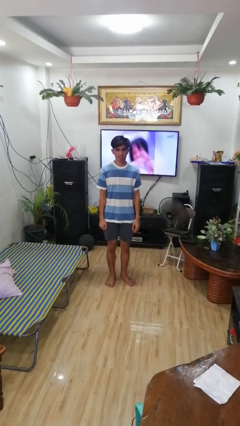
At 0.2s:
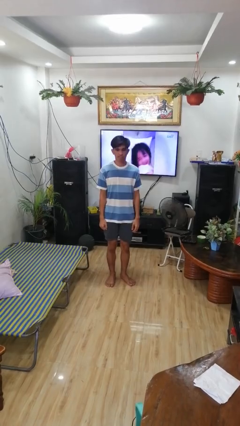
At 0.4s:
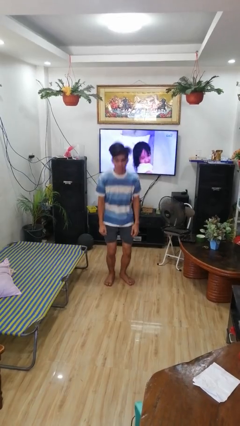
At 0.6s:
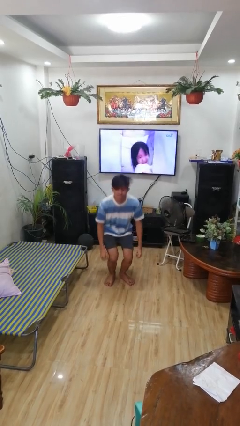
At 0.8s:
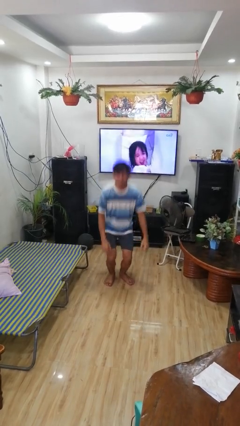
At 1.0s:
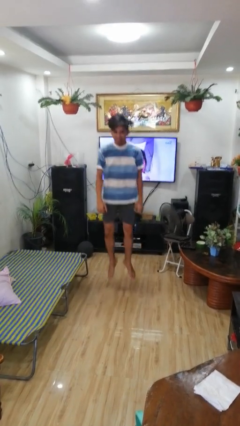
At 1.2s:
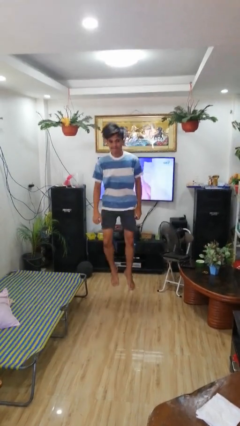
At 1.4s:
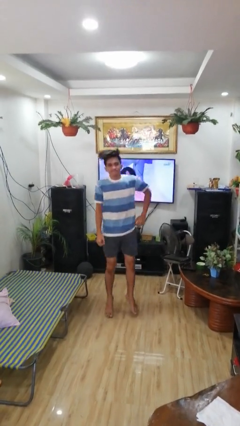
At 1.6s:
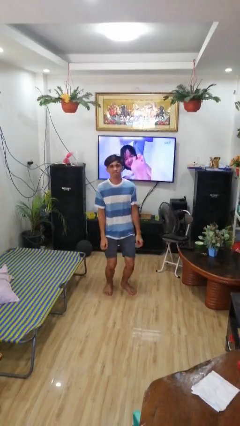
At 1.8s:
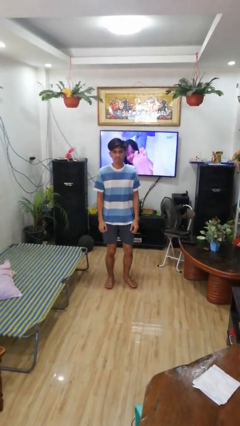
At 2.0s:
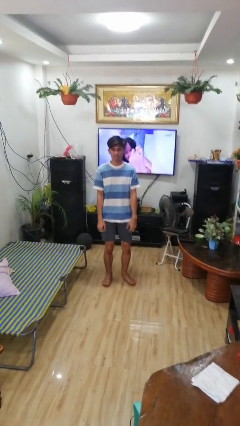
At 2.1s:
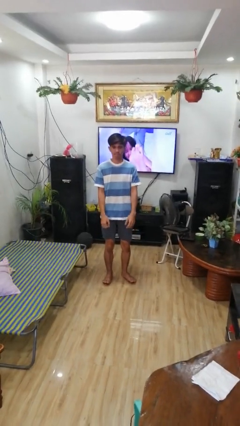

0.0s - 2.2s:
person jumps

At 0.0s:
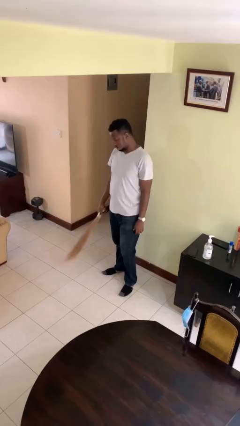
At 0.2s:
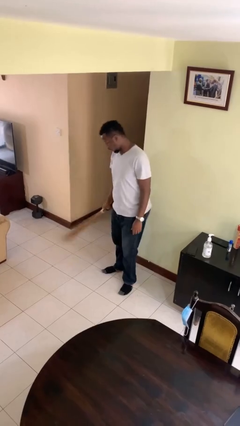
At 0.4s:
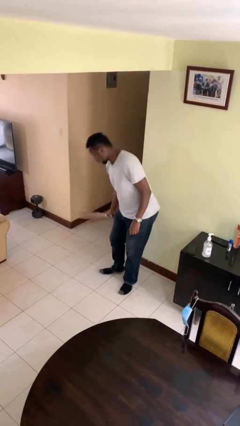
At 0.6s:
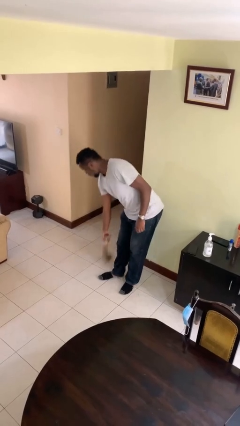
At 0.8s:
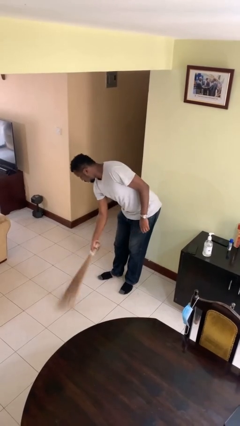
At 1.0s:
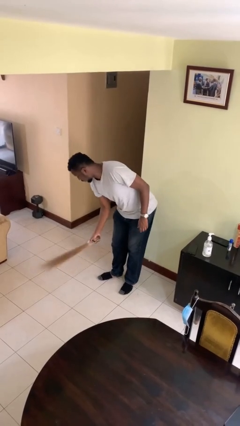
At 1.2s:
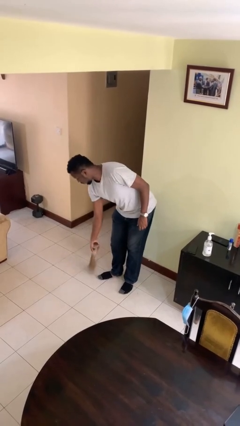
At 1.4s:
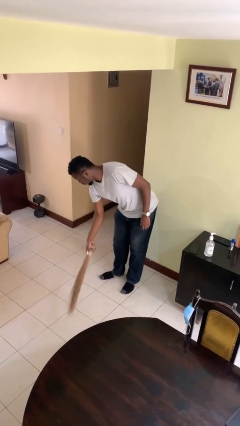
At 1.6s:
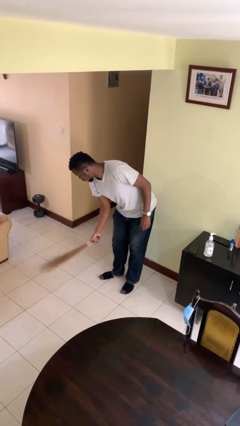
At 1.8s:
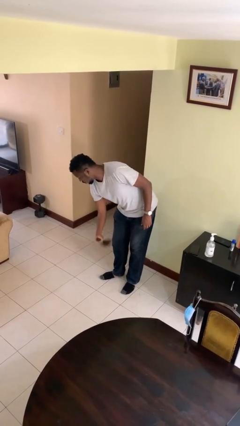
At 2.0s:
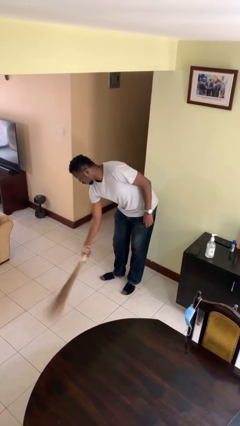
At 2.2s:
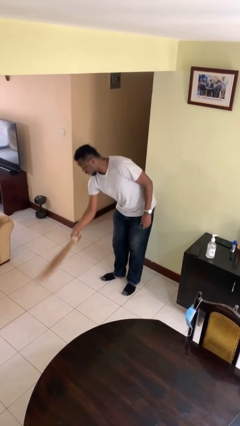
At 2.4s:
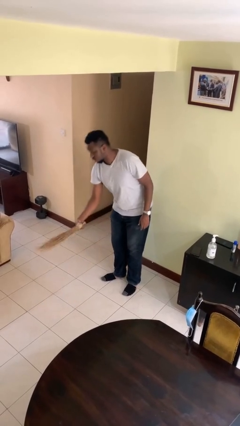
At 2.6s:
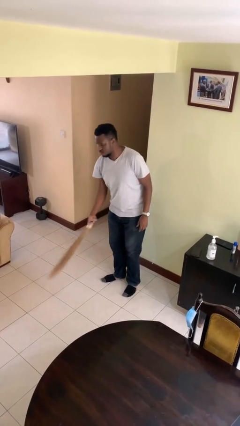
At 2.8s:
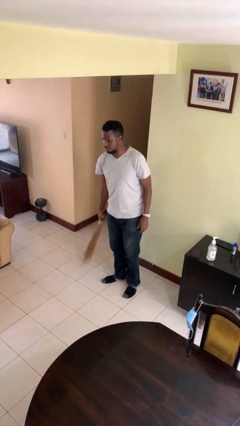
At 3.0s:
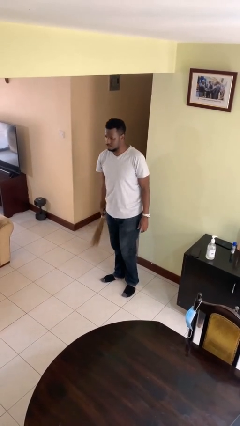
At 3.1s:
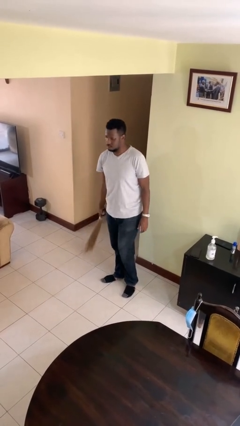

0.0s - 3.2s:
person sweeps floor

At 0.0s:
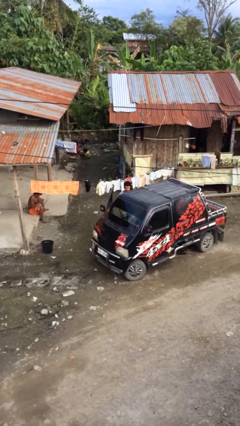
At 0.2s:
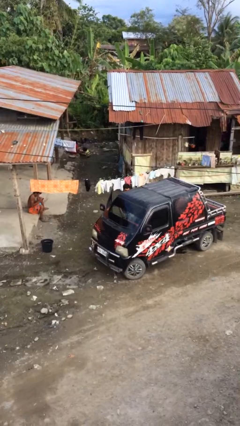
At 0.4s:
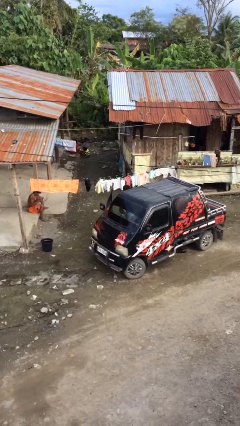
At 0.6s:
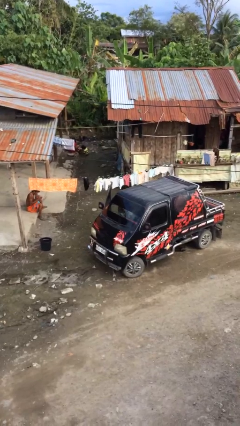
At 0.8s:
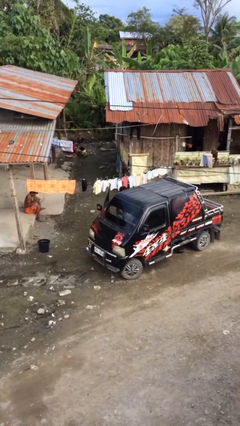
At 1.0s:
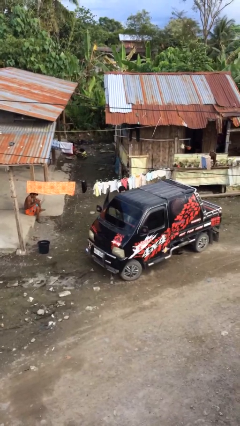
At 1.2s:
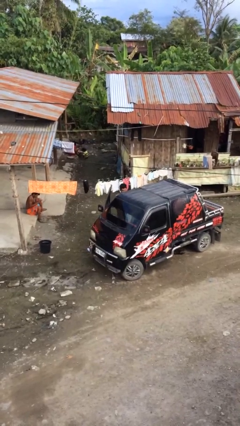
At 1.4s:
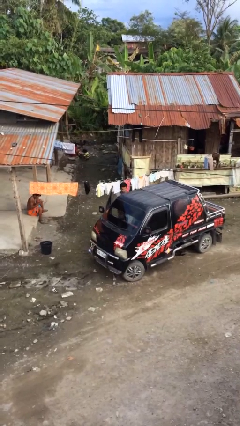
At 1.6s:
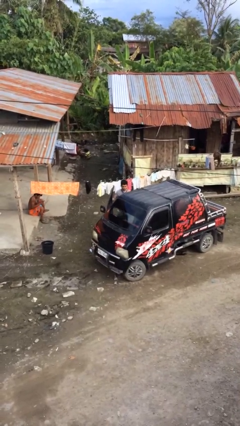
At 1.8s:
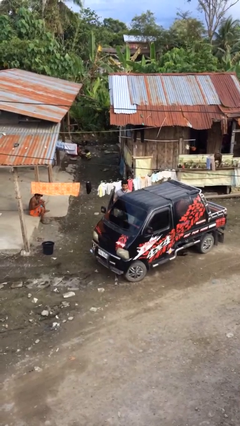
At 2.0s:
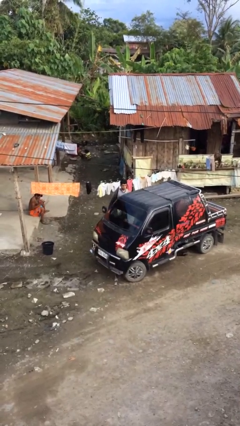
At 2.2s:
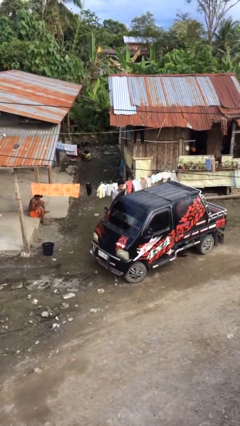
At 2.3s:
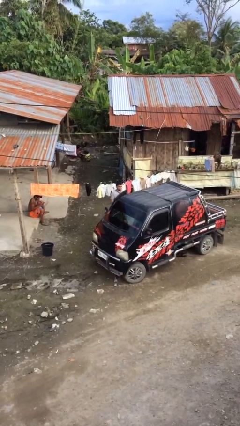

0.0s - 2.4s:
person unloads car

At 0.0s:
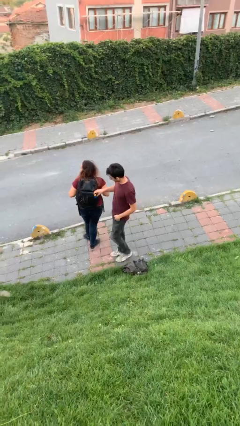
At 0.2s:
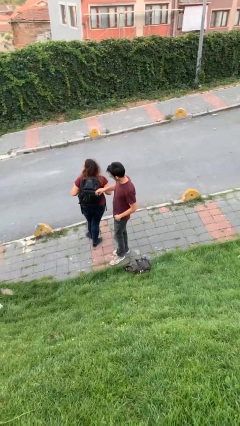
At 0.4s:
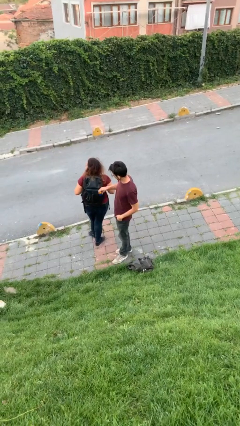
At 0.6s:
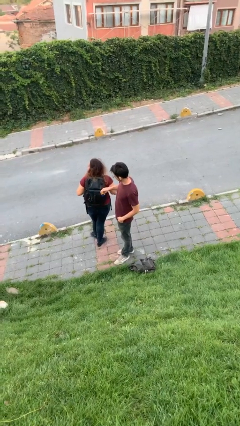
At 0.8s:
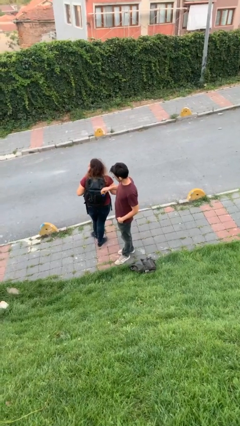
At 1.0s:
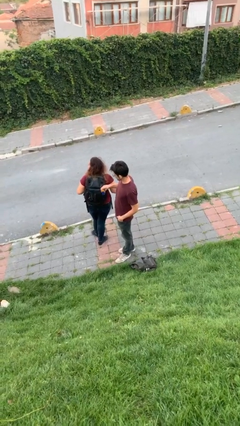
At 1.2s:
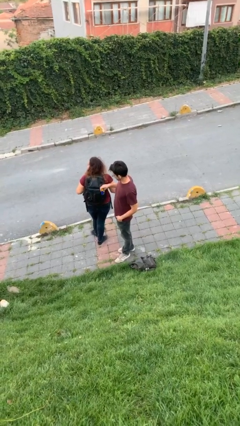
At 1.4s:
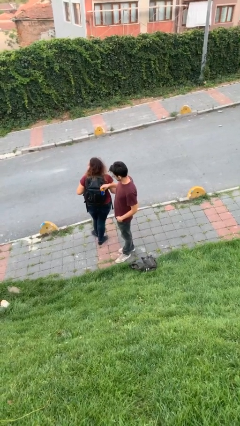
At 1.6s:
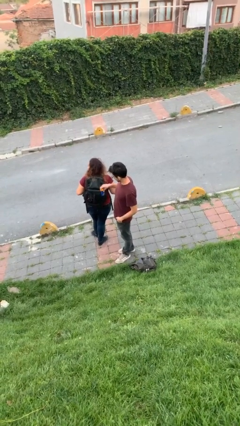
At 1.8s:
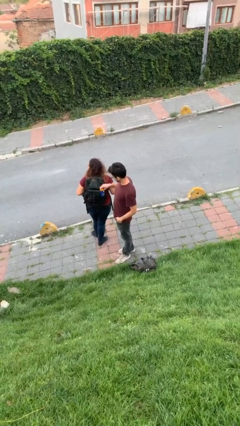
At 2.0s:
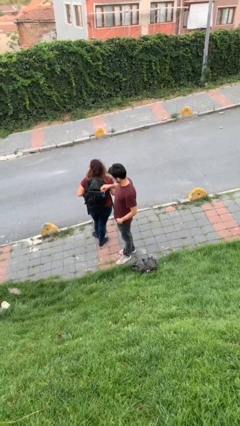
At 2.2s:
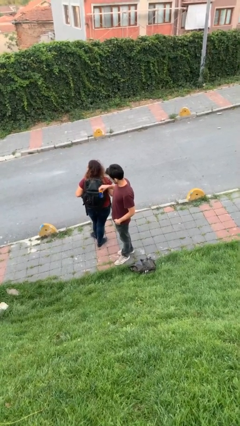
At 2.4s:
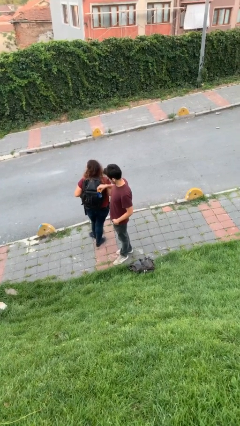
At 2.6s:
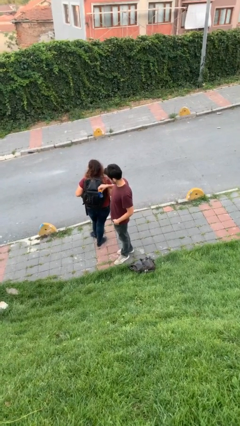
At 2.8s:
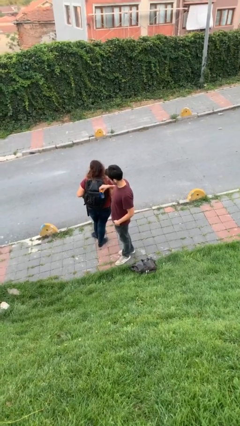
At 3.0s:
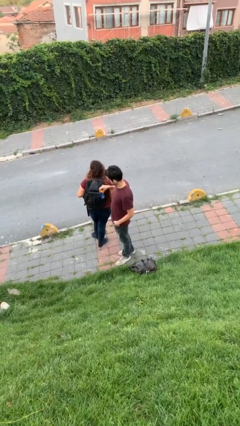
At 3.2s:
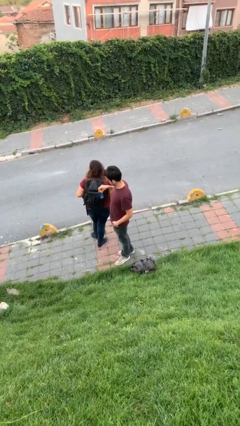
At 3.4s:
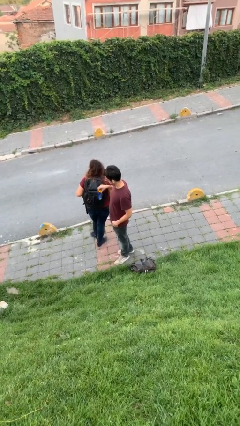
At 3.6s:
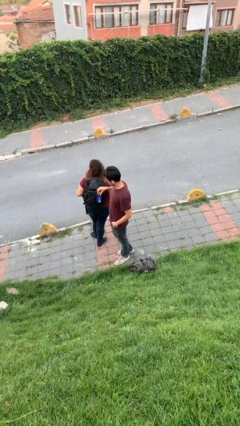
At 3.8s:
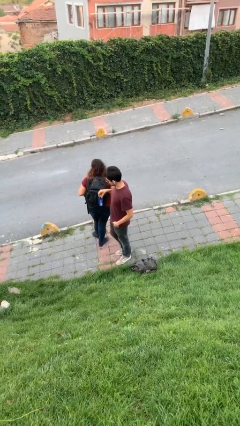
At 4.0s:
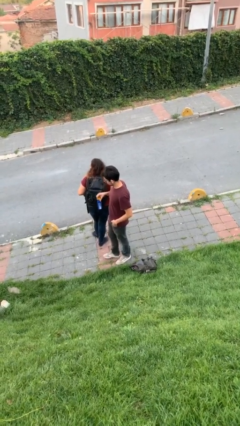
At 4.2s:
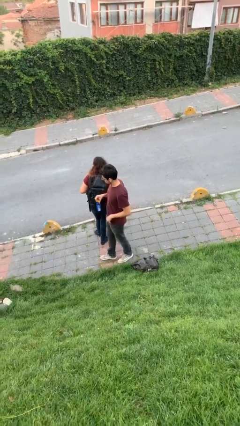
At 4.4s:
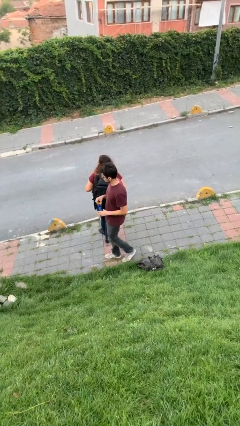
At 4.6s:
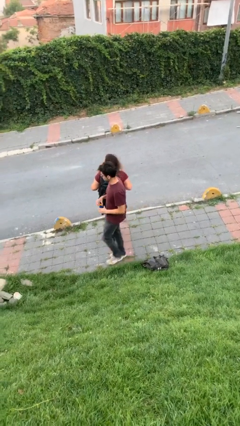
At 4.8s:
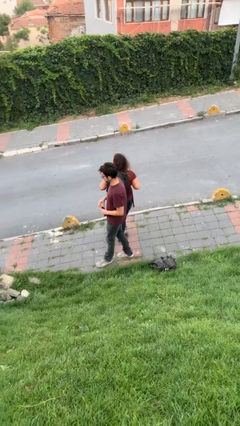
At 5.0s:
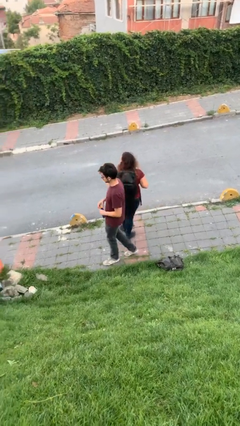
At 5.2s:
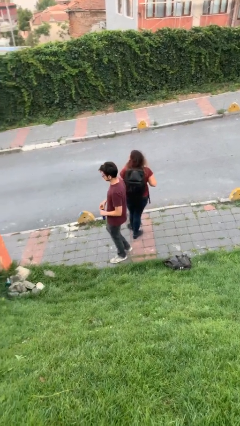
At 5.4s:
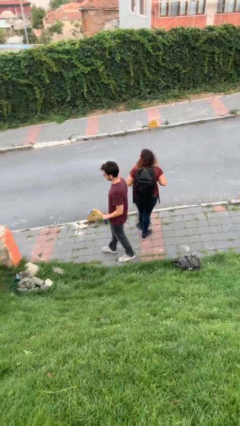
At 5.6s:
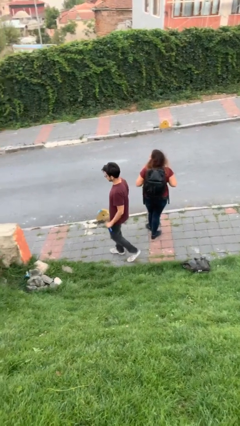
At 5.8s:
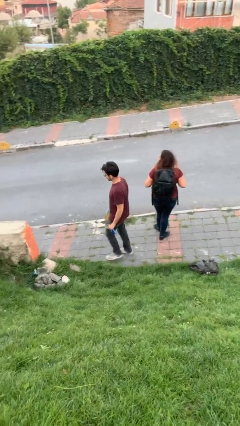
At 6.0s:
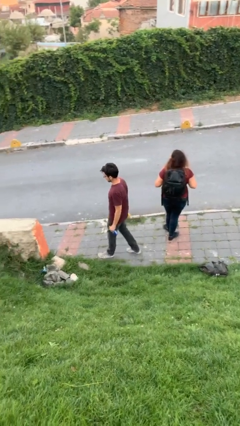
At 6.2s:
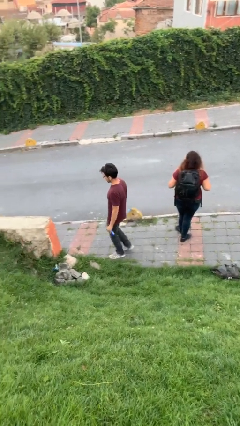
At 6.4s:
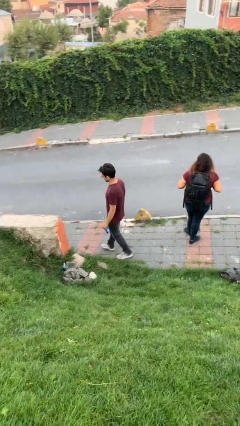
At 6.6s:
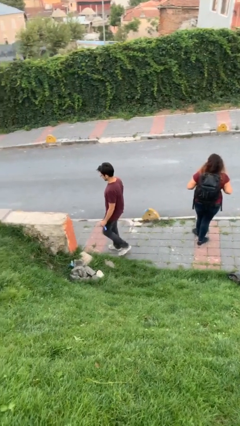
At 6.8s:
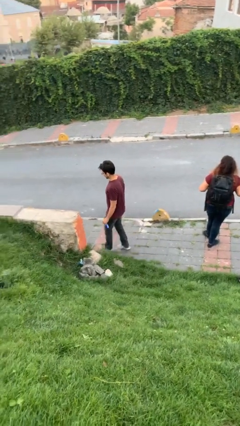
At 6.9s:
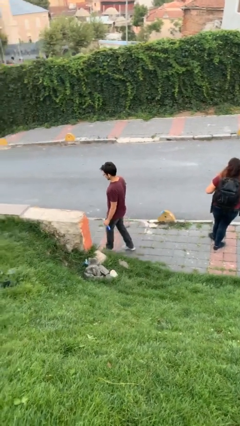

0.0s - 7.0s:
person steals object from person

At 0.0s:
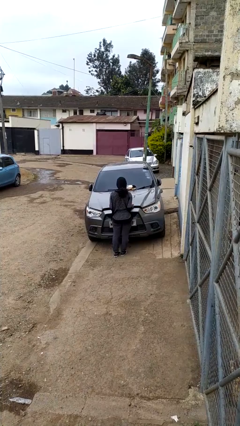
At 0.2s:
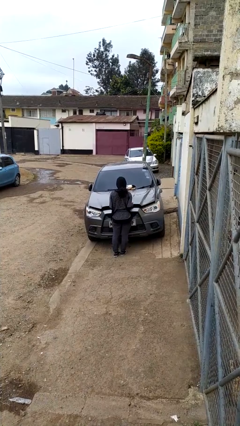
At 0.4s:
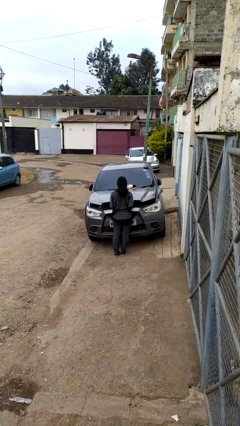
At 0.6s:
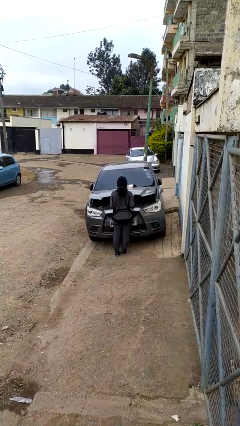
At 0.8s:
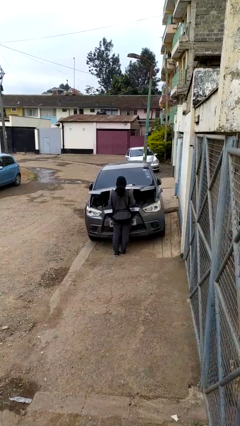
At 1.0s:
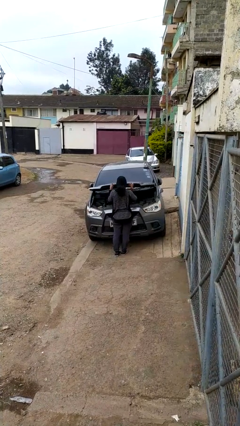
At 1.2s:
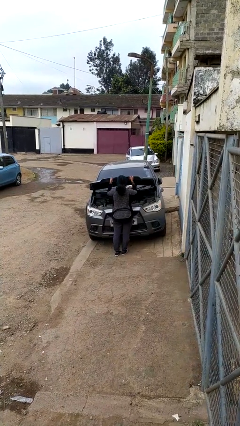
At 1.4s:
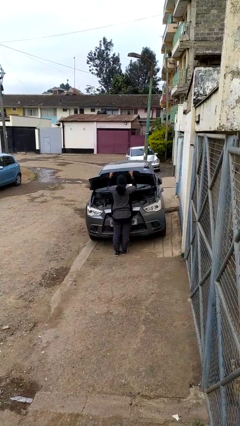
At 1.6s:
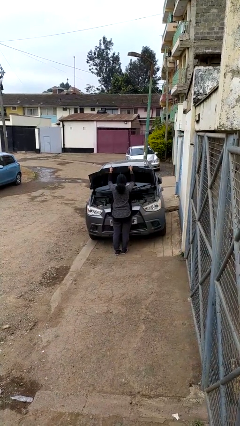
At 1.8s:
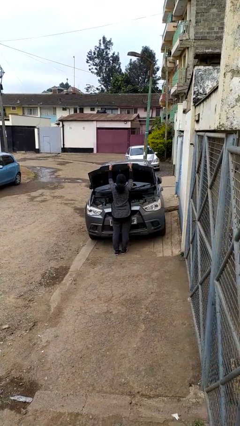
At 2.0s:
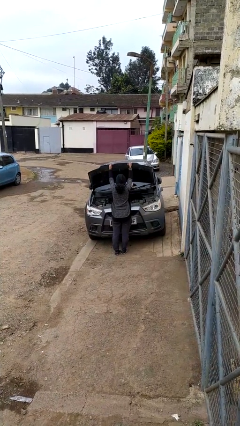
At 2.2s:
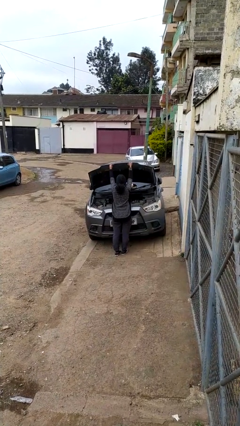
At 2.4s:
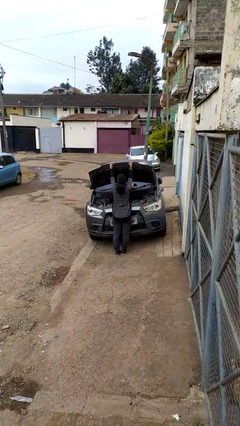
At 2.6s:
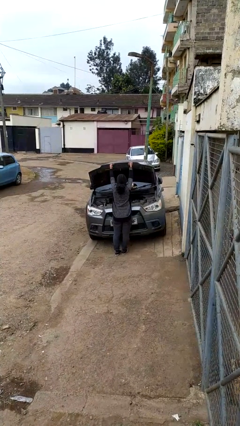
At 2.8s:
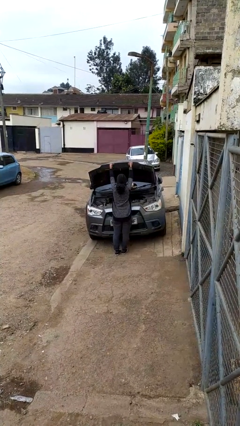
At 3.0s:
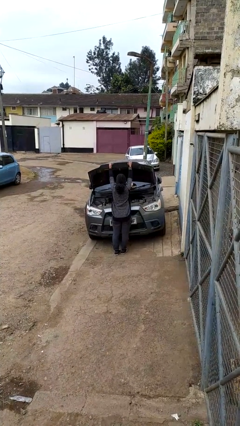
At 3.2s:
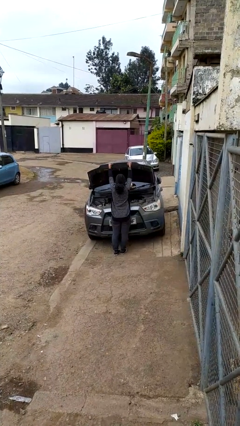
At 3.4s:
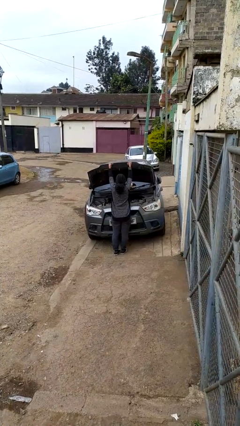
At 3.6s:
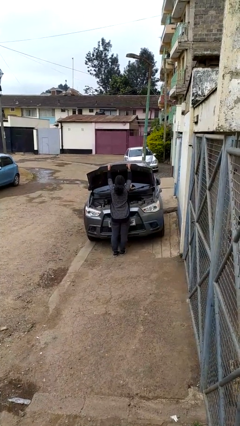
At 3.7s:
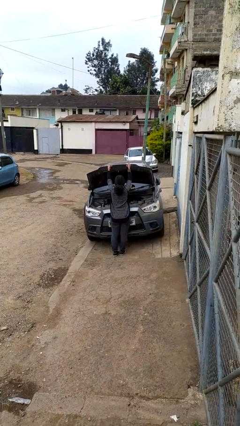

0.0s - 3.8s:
person opens car hood
